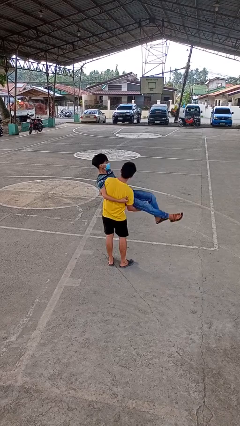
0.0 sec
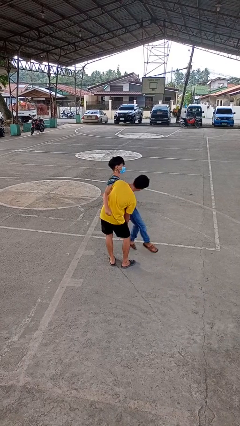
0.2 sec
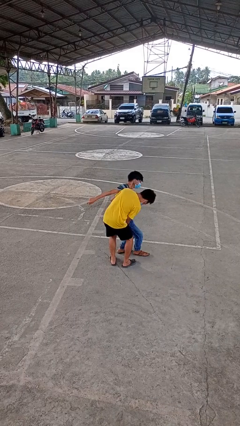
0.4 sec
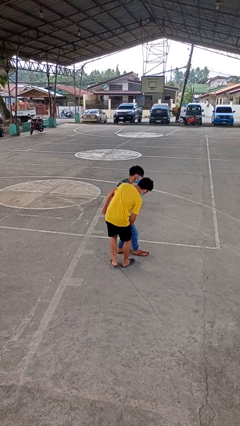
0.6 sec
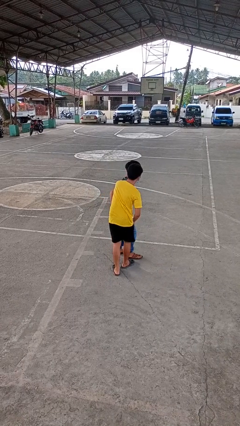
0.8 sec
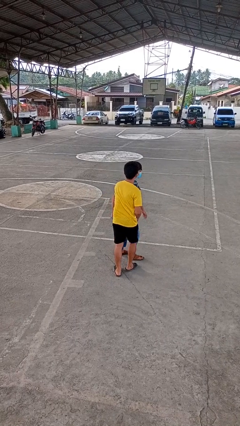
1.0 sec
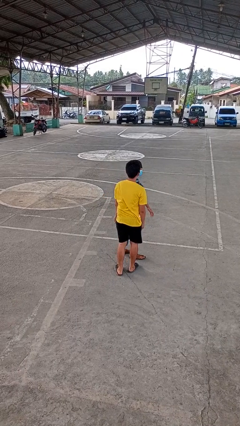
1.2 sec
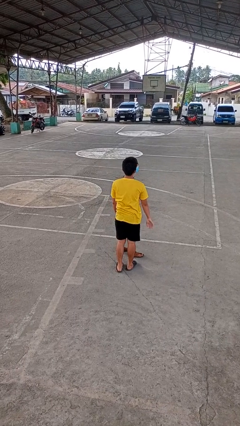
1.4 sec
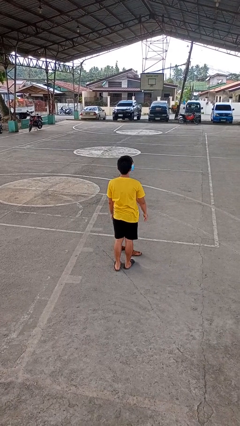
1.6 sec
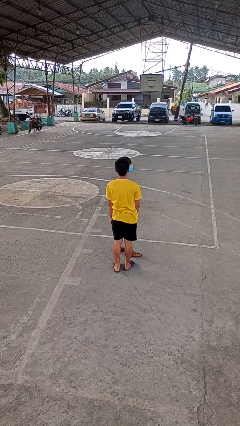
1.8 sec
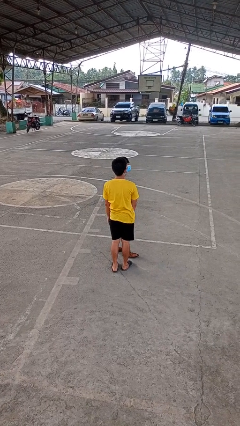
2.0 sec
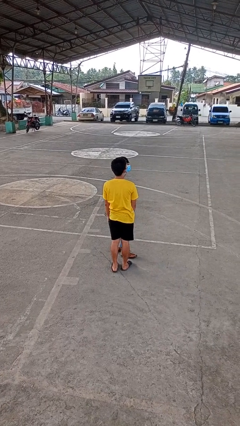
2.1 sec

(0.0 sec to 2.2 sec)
person puts down person

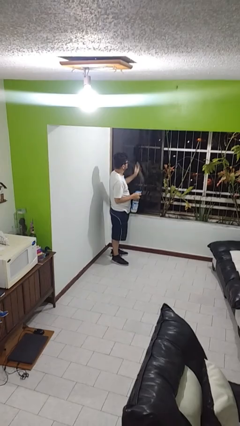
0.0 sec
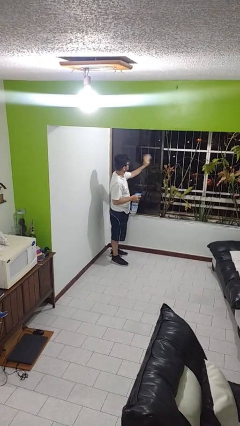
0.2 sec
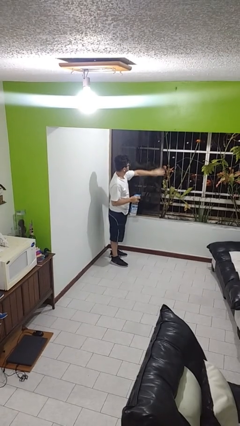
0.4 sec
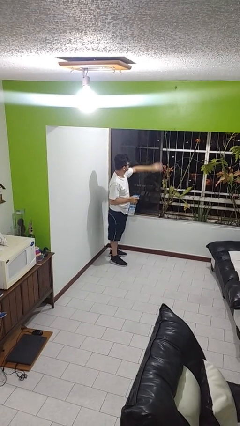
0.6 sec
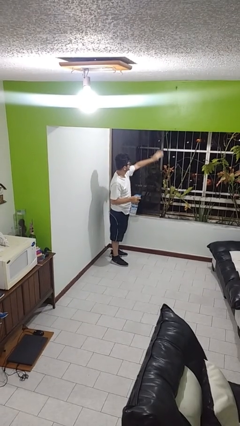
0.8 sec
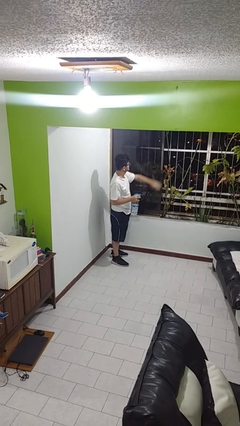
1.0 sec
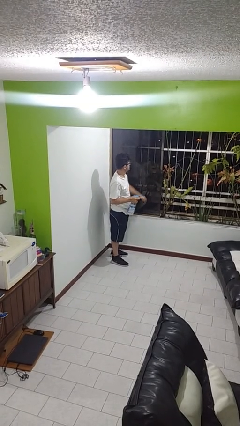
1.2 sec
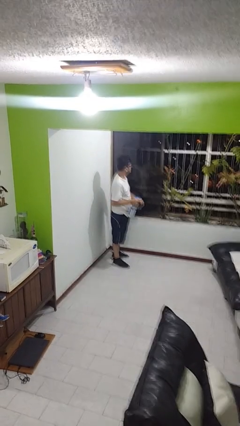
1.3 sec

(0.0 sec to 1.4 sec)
person washes window

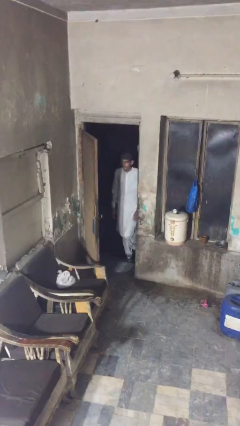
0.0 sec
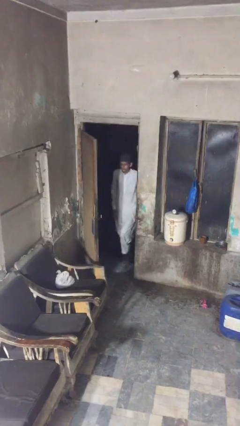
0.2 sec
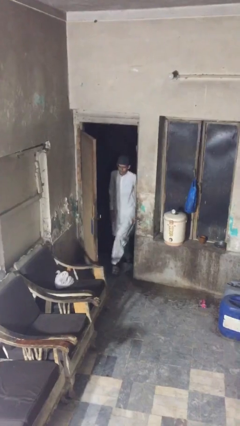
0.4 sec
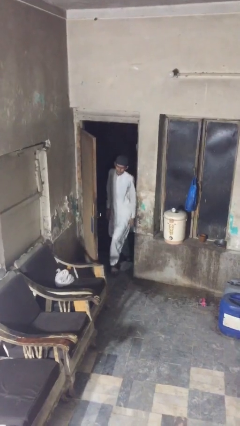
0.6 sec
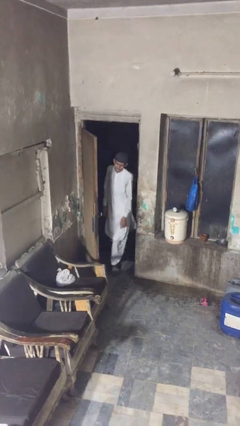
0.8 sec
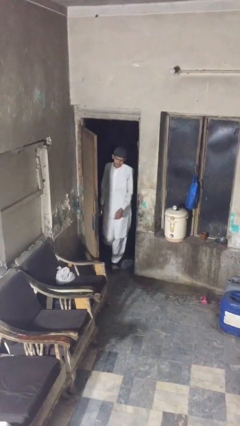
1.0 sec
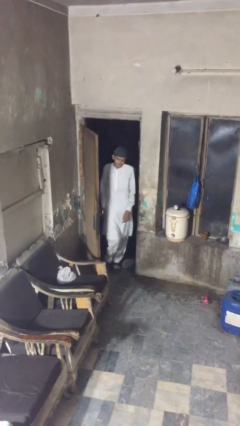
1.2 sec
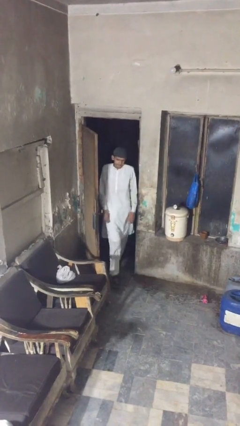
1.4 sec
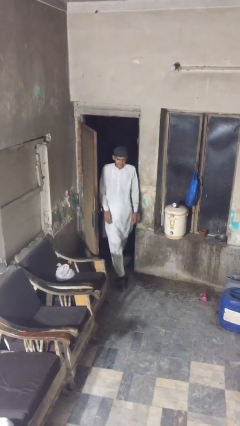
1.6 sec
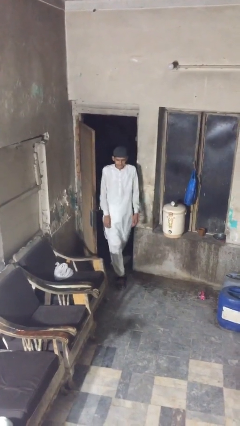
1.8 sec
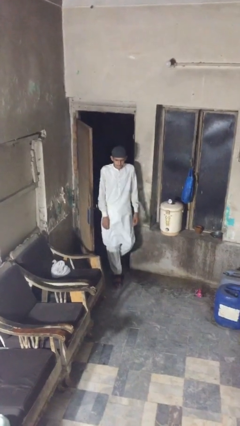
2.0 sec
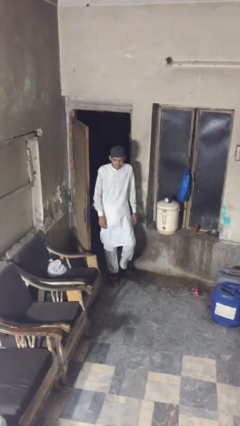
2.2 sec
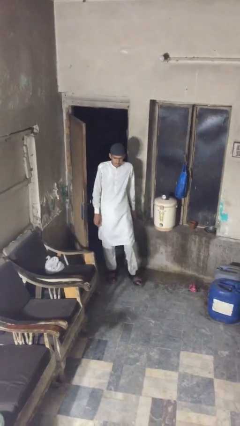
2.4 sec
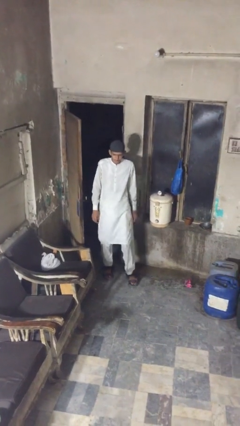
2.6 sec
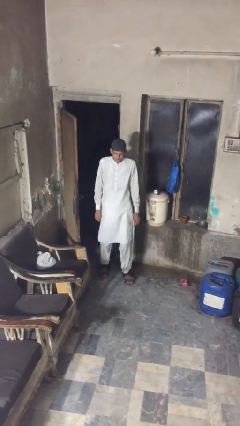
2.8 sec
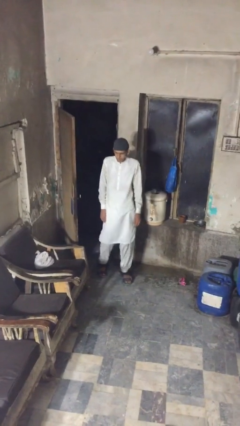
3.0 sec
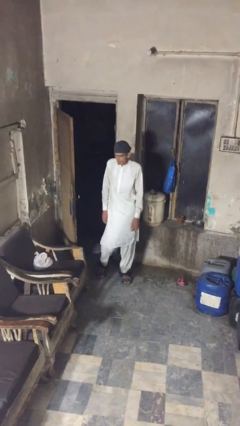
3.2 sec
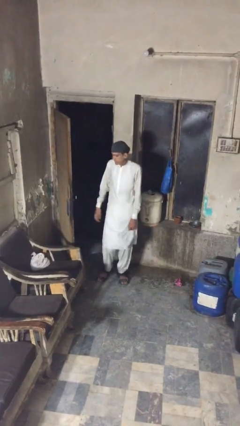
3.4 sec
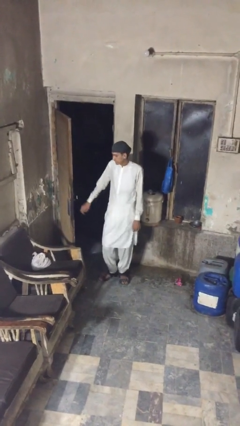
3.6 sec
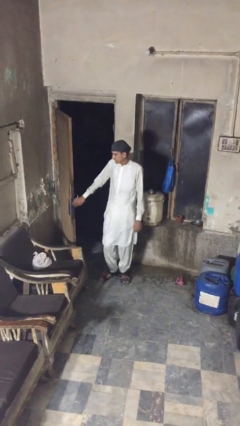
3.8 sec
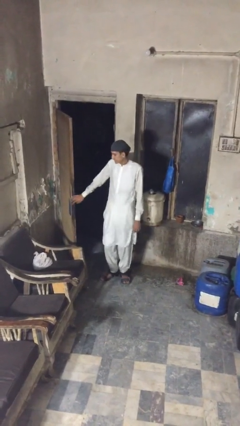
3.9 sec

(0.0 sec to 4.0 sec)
person enters scene through structure

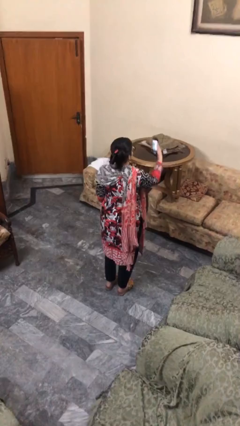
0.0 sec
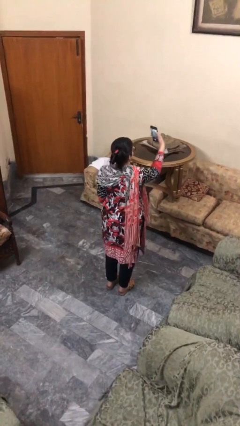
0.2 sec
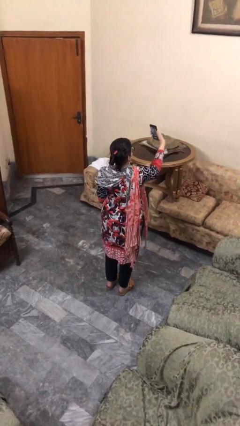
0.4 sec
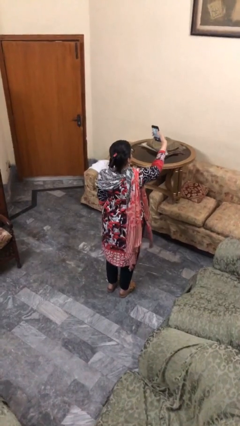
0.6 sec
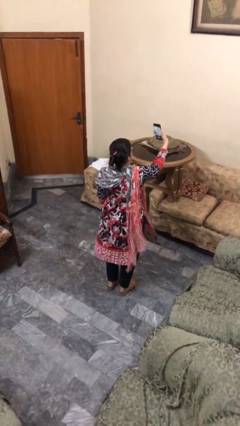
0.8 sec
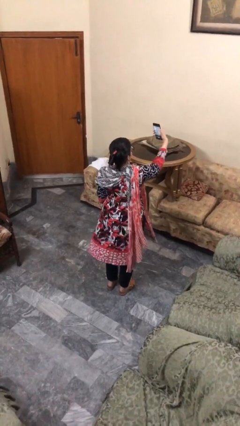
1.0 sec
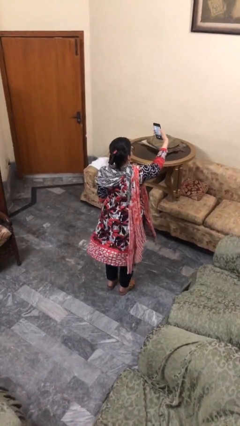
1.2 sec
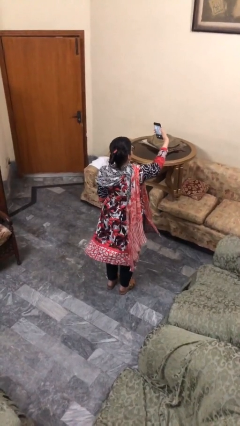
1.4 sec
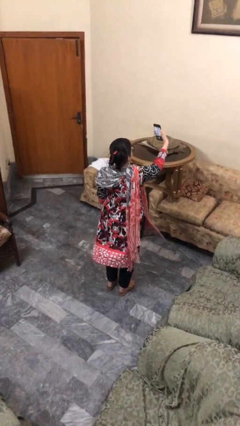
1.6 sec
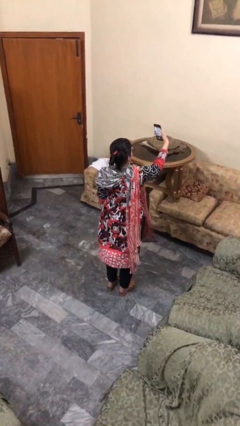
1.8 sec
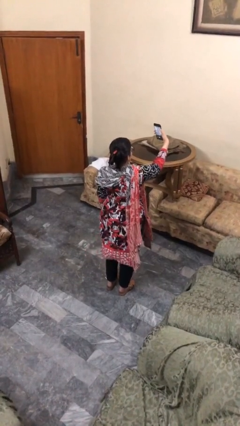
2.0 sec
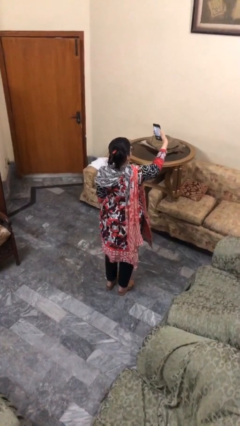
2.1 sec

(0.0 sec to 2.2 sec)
person takes selfie

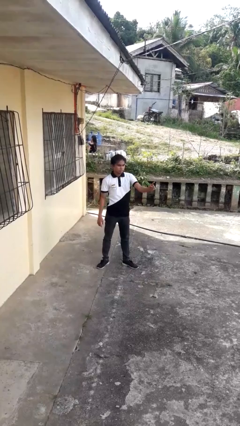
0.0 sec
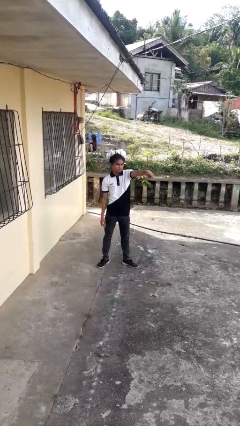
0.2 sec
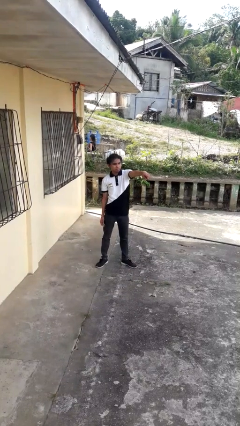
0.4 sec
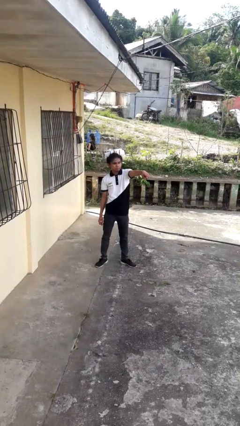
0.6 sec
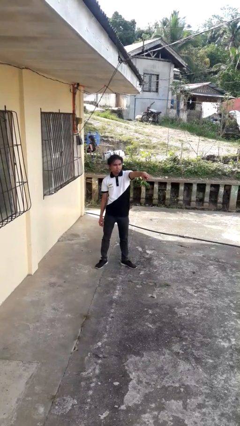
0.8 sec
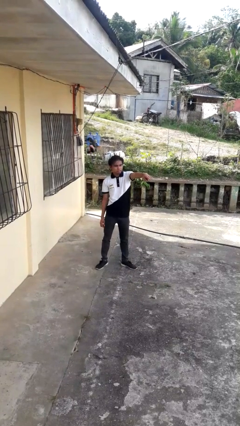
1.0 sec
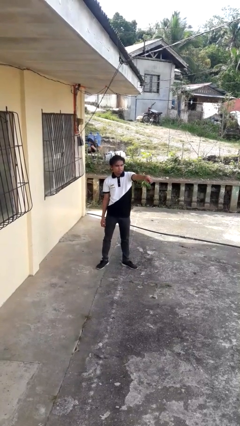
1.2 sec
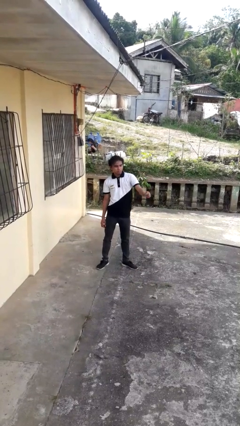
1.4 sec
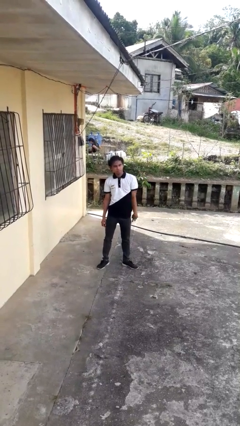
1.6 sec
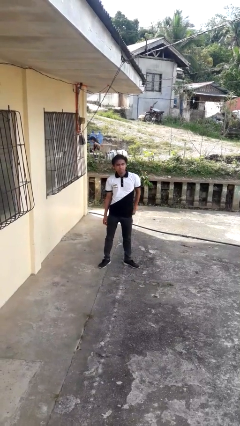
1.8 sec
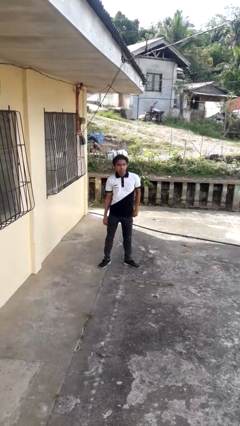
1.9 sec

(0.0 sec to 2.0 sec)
person points at person

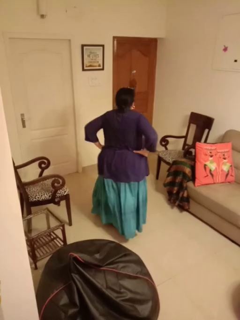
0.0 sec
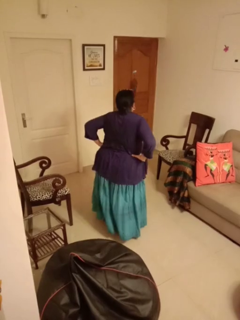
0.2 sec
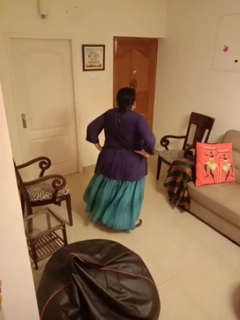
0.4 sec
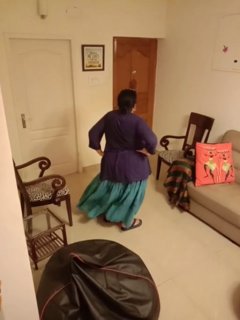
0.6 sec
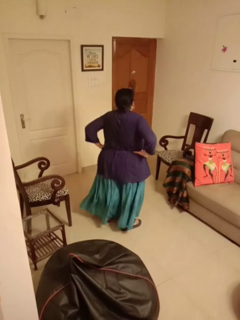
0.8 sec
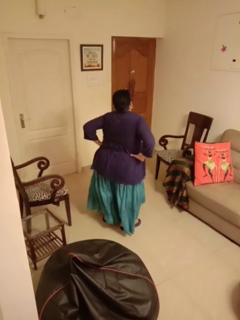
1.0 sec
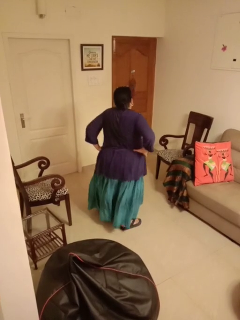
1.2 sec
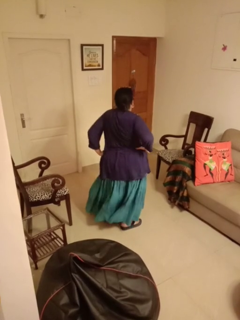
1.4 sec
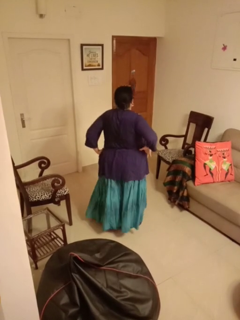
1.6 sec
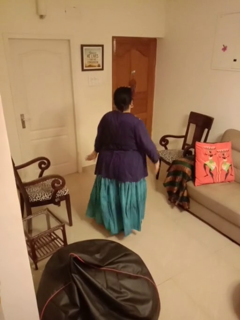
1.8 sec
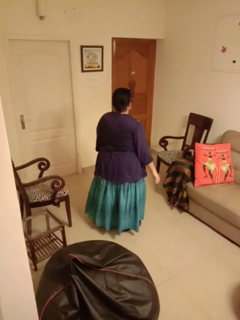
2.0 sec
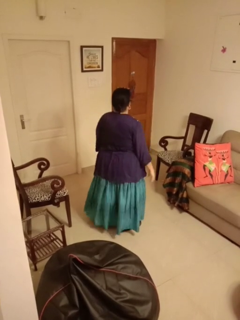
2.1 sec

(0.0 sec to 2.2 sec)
person wiggles hips

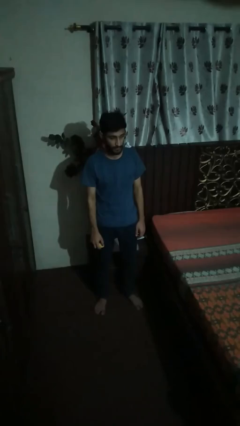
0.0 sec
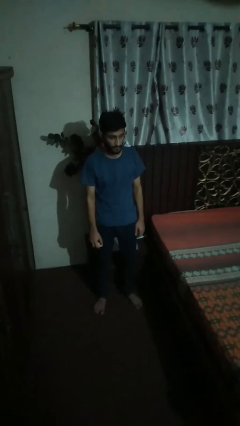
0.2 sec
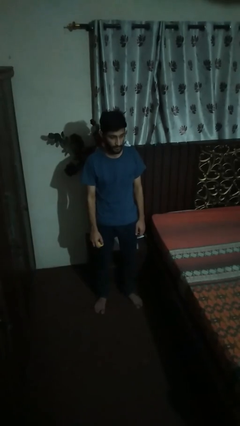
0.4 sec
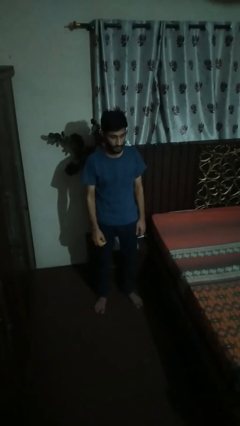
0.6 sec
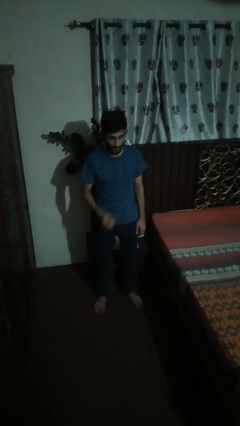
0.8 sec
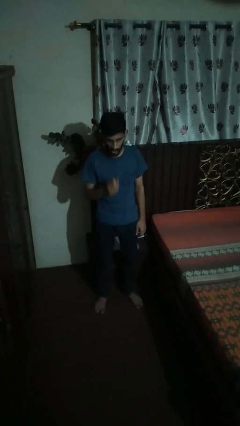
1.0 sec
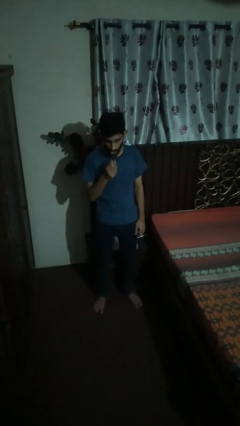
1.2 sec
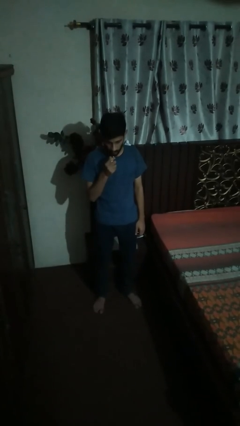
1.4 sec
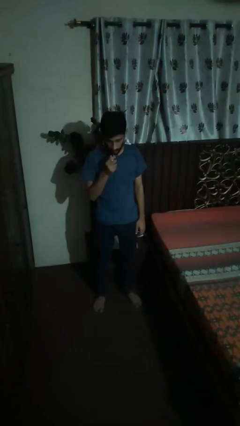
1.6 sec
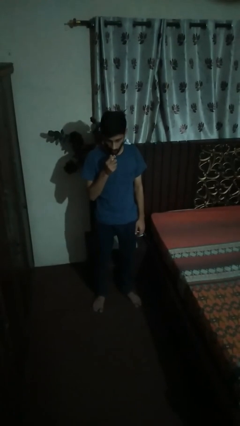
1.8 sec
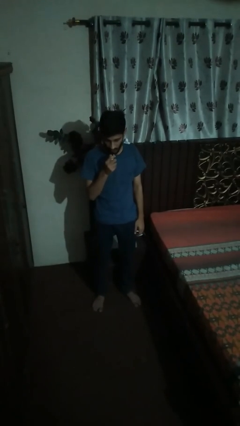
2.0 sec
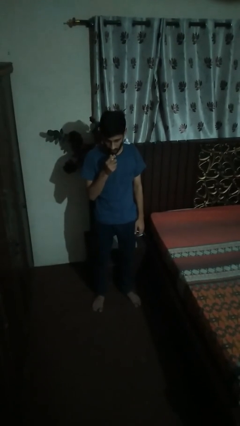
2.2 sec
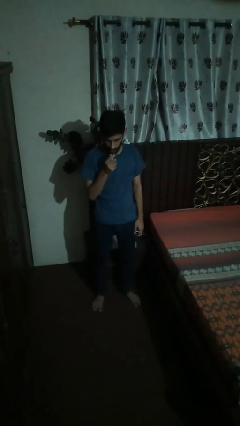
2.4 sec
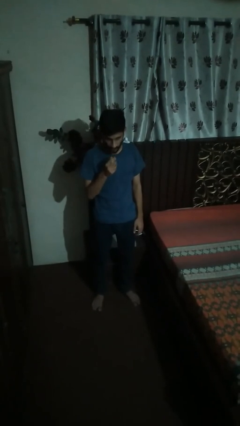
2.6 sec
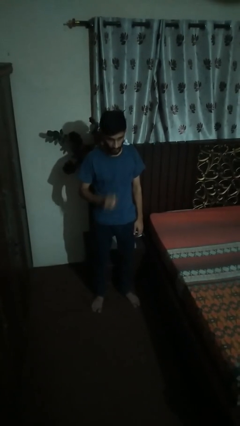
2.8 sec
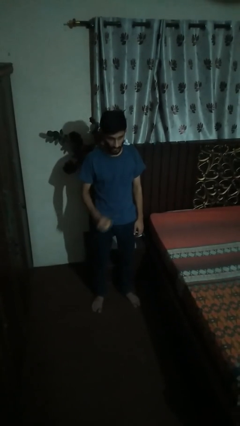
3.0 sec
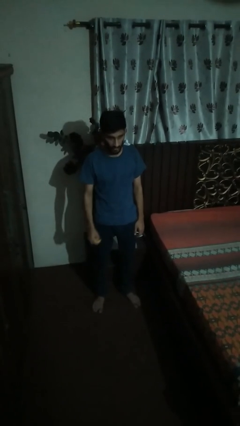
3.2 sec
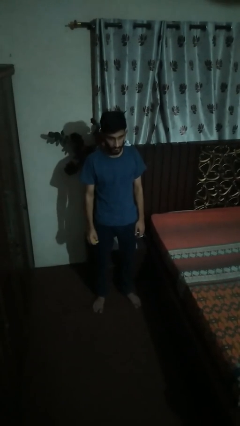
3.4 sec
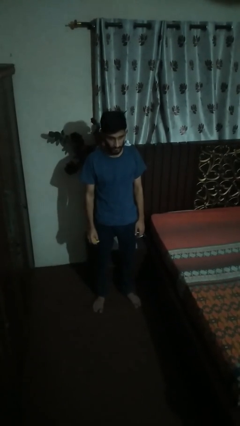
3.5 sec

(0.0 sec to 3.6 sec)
person eats banana

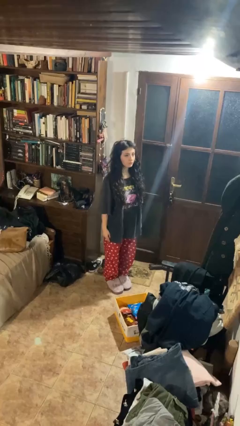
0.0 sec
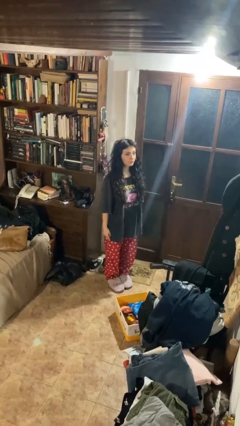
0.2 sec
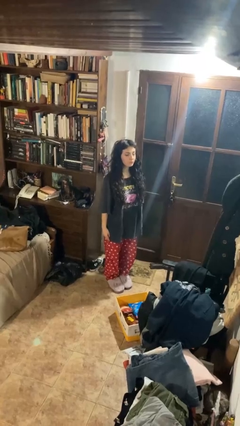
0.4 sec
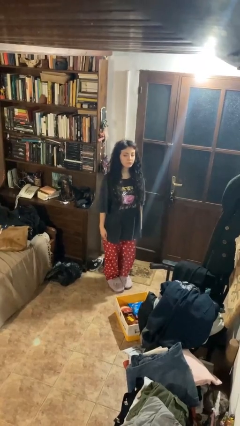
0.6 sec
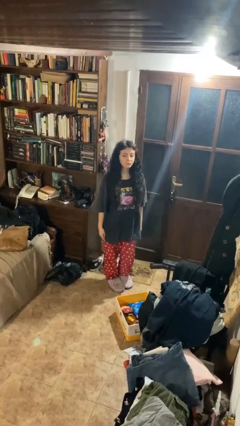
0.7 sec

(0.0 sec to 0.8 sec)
person salutes
